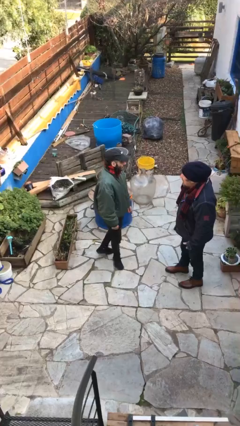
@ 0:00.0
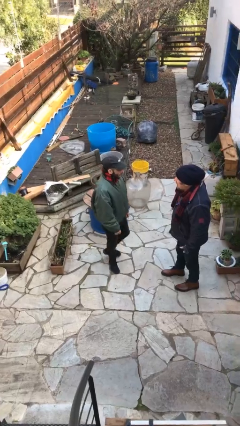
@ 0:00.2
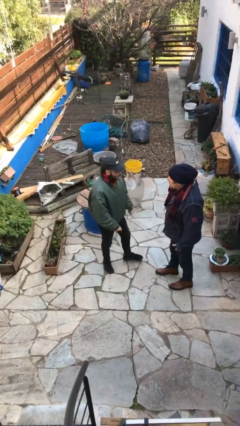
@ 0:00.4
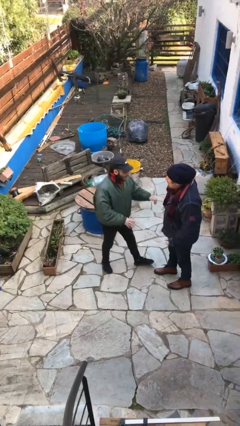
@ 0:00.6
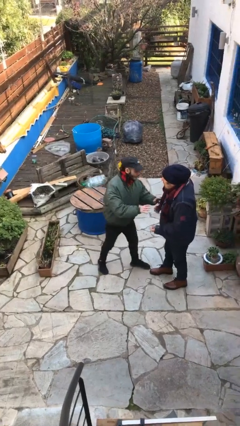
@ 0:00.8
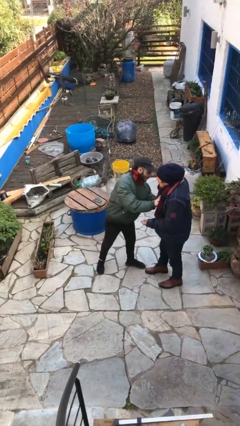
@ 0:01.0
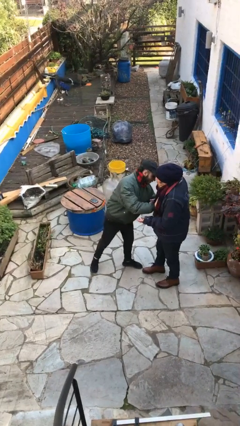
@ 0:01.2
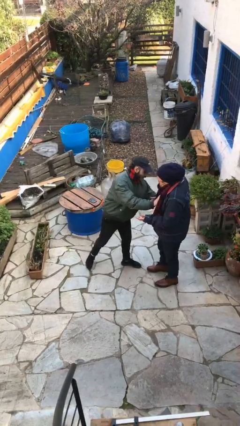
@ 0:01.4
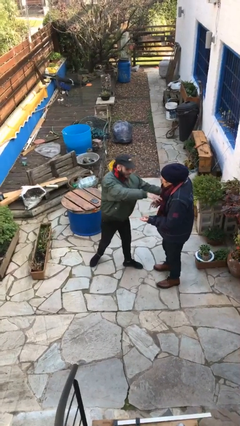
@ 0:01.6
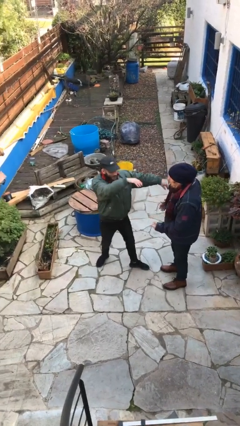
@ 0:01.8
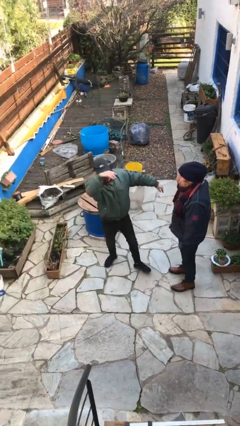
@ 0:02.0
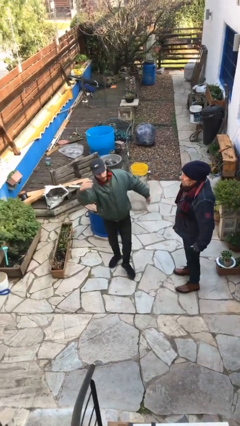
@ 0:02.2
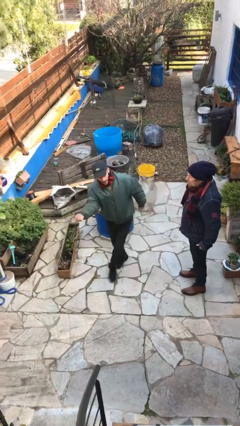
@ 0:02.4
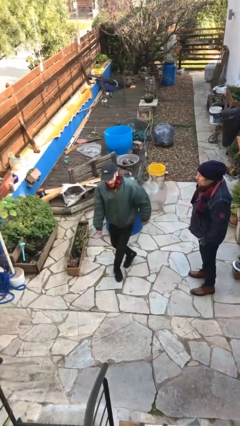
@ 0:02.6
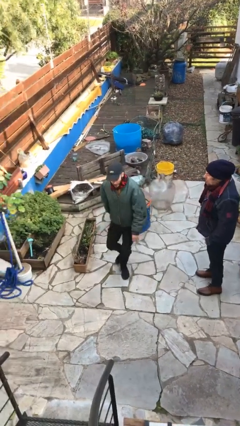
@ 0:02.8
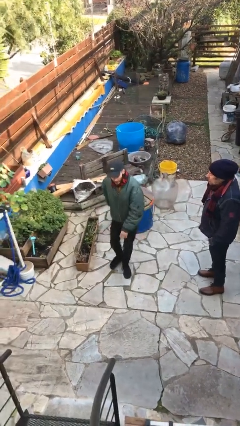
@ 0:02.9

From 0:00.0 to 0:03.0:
person shoves person

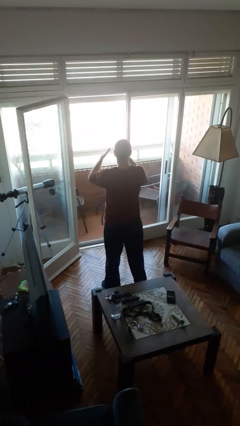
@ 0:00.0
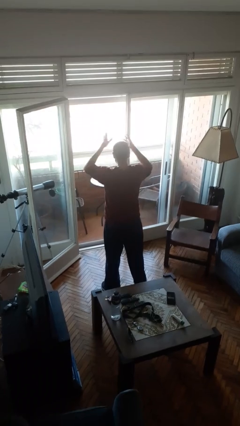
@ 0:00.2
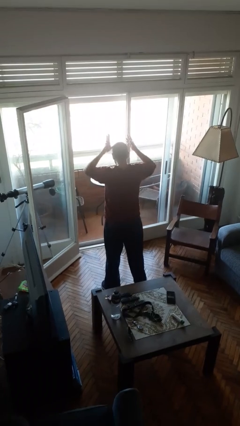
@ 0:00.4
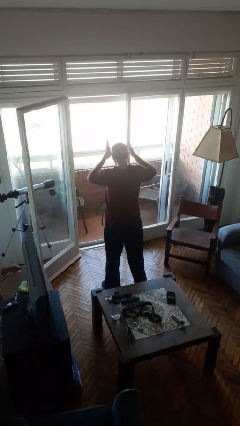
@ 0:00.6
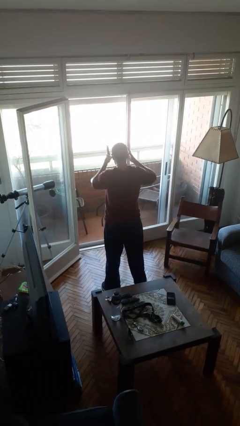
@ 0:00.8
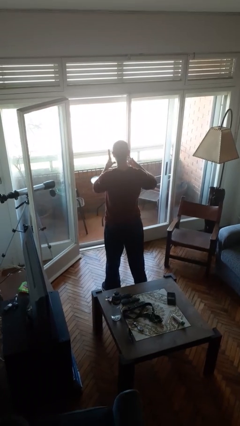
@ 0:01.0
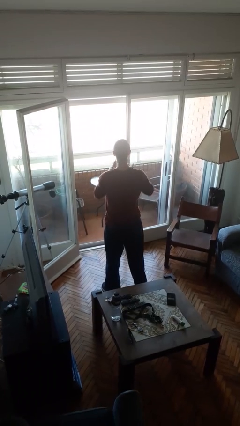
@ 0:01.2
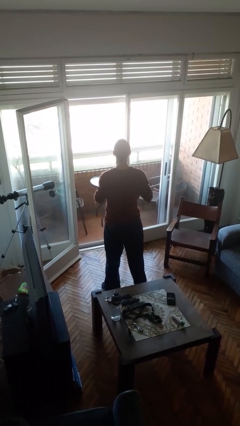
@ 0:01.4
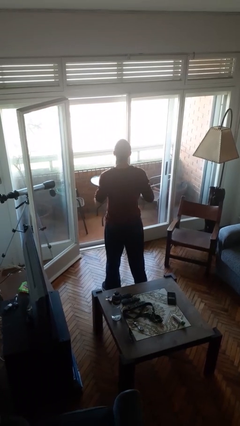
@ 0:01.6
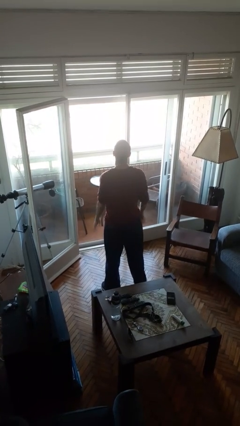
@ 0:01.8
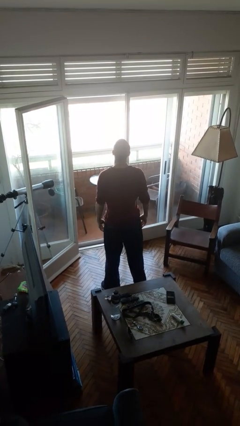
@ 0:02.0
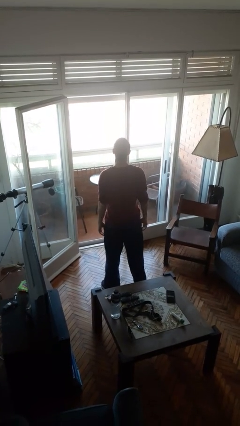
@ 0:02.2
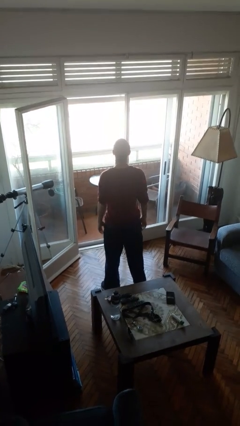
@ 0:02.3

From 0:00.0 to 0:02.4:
person puts on necklace

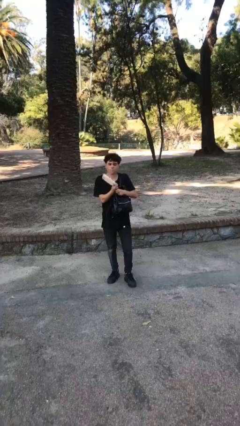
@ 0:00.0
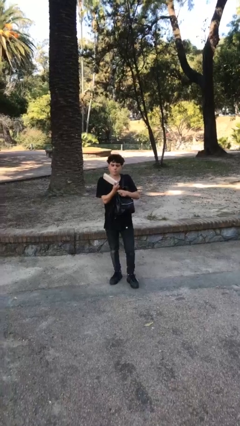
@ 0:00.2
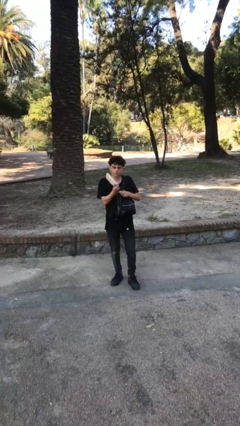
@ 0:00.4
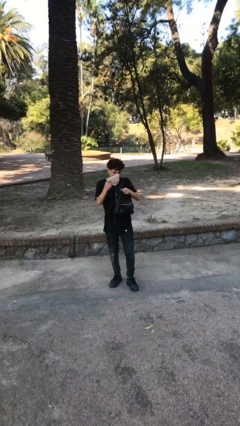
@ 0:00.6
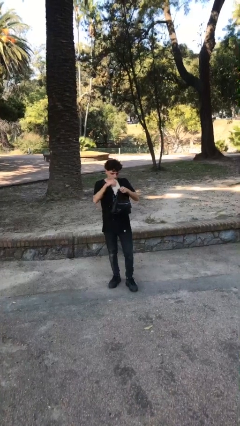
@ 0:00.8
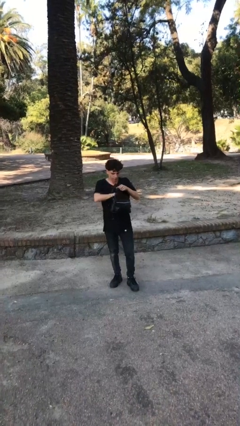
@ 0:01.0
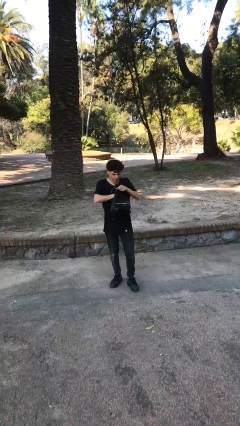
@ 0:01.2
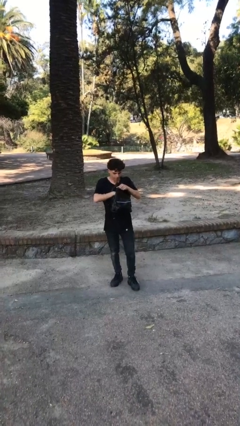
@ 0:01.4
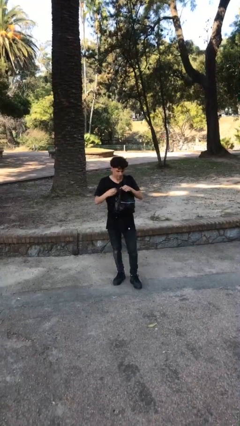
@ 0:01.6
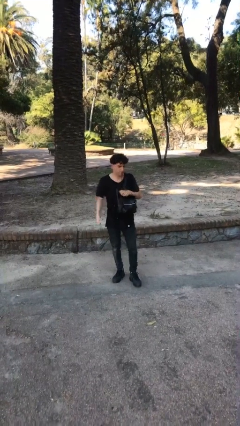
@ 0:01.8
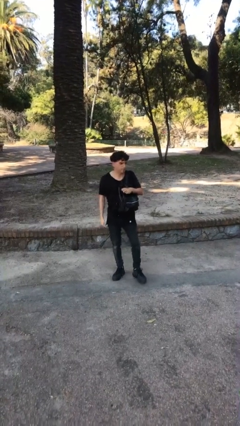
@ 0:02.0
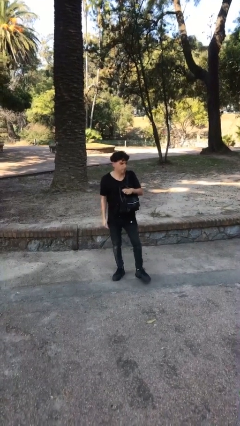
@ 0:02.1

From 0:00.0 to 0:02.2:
person puts object into purse

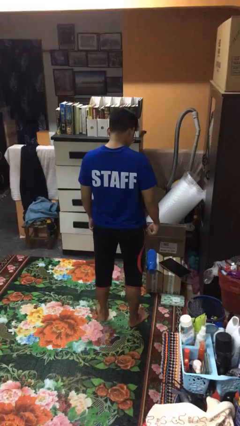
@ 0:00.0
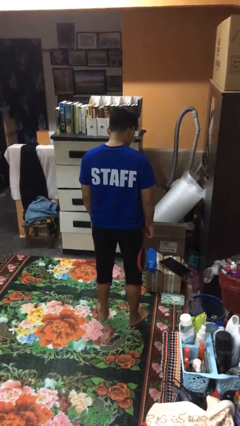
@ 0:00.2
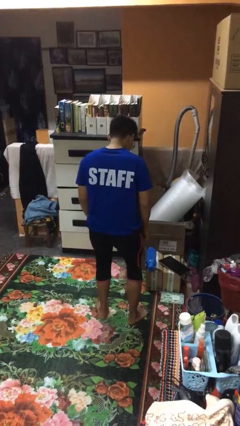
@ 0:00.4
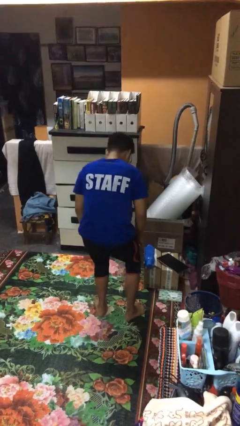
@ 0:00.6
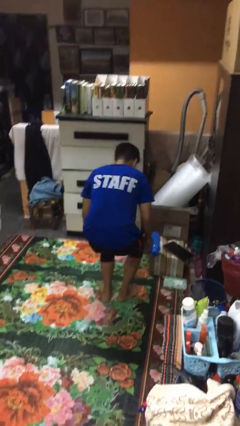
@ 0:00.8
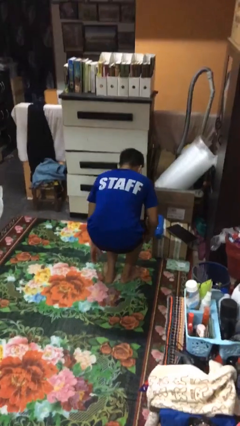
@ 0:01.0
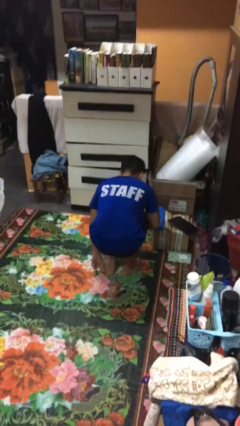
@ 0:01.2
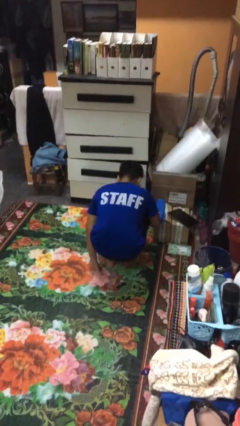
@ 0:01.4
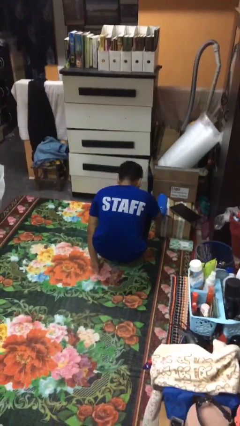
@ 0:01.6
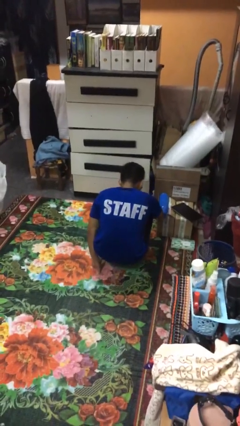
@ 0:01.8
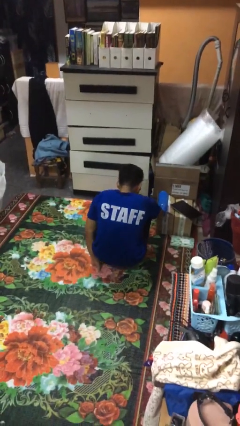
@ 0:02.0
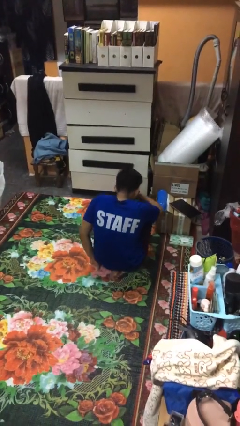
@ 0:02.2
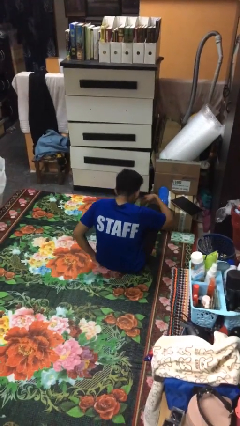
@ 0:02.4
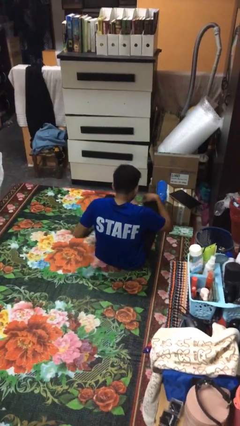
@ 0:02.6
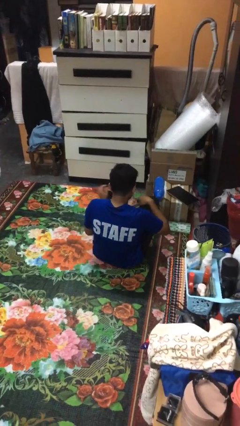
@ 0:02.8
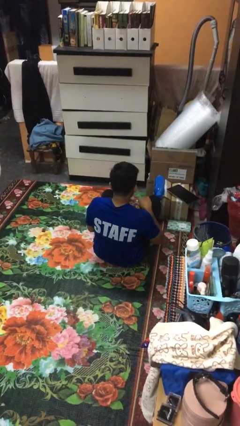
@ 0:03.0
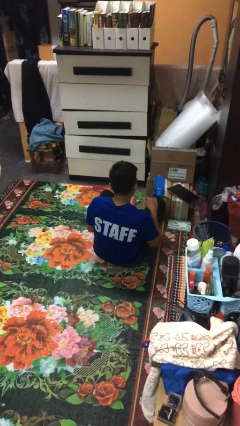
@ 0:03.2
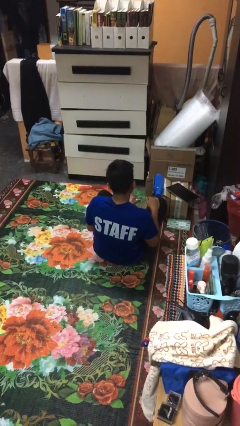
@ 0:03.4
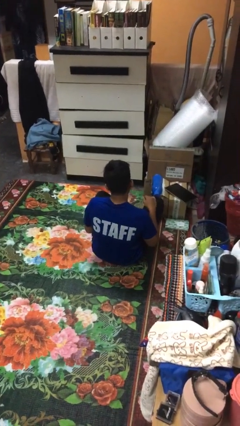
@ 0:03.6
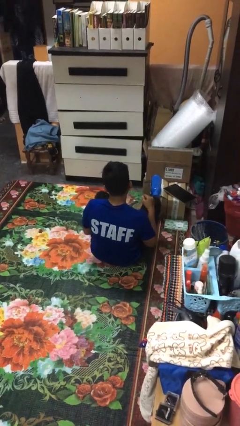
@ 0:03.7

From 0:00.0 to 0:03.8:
person sits crisscross

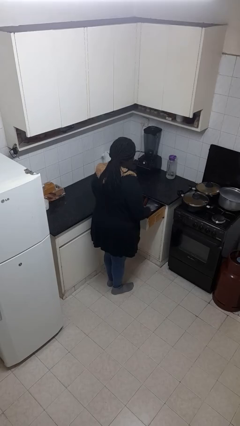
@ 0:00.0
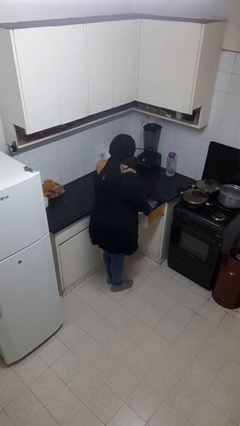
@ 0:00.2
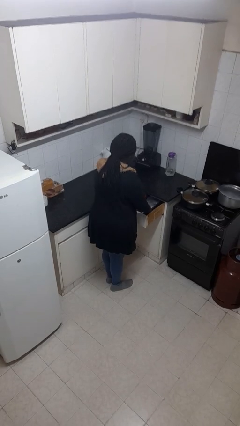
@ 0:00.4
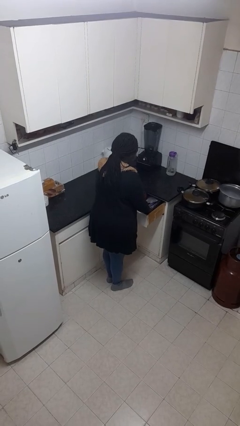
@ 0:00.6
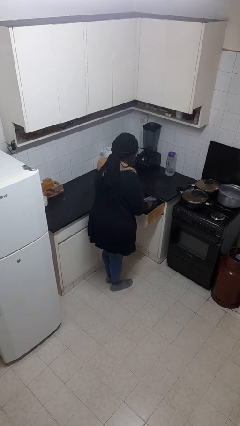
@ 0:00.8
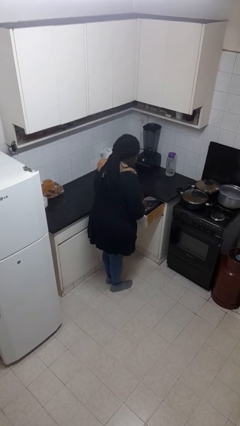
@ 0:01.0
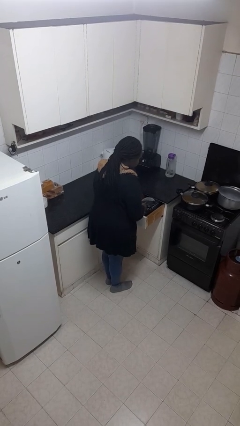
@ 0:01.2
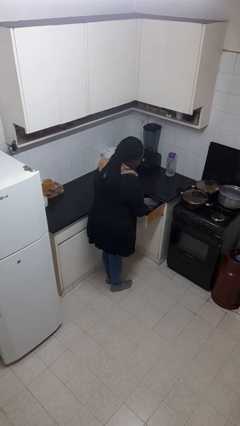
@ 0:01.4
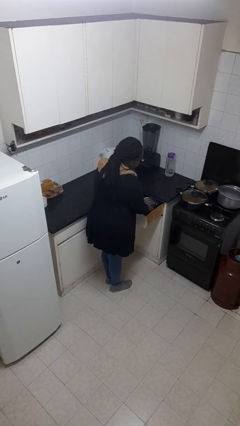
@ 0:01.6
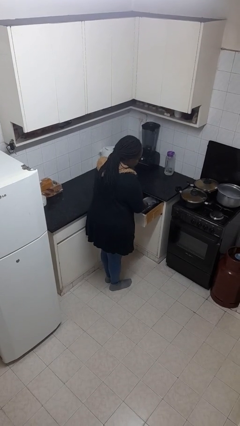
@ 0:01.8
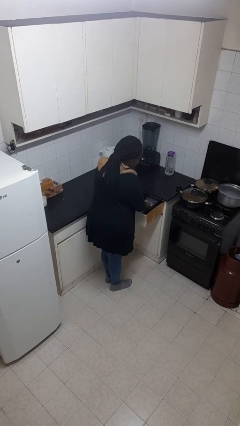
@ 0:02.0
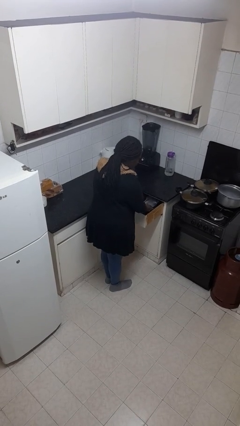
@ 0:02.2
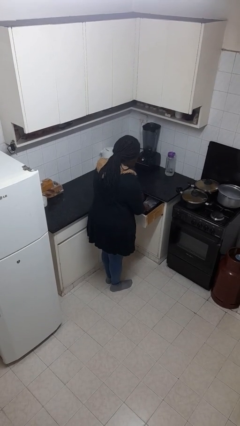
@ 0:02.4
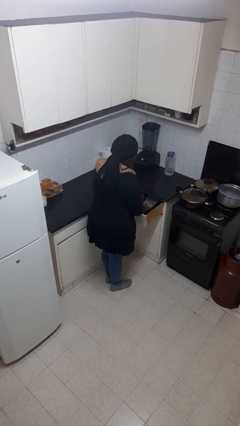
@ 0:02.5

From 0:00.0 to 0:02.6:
person searches in kitchen drawer

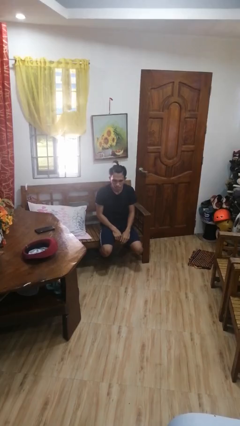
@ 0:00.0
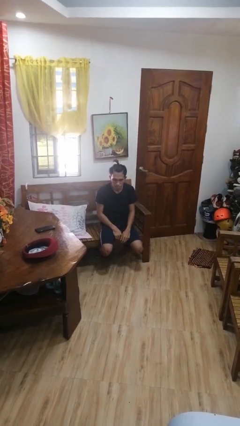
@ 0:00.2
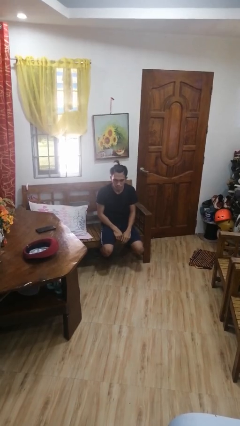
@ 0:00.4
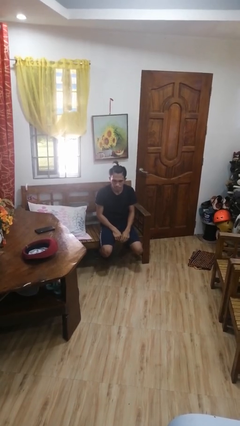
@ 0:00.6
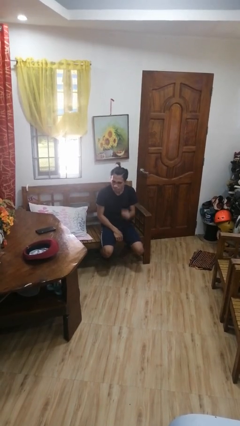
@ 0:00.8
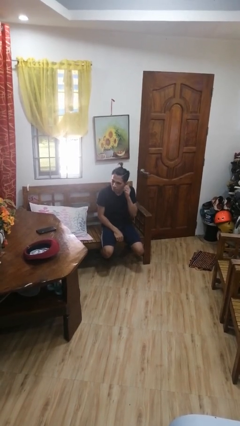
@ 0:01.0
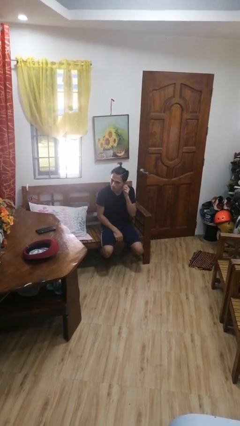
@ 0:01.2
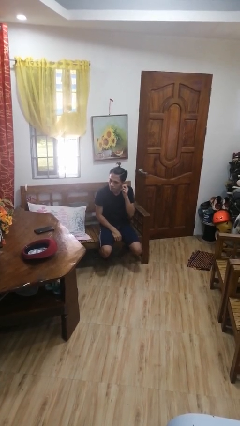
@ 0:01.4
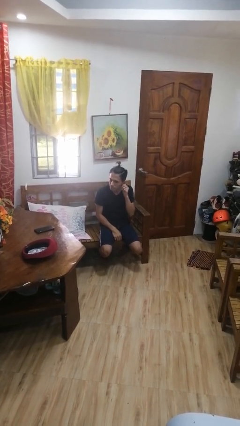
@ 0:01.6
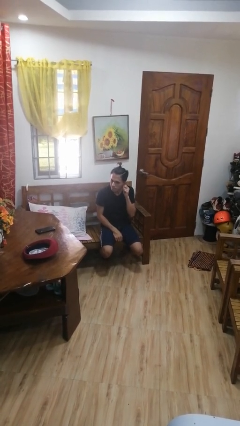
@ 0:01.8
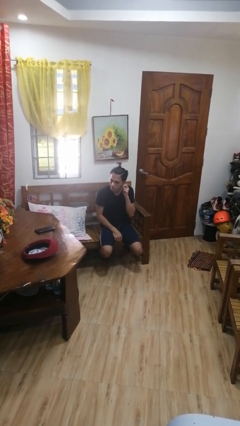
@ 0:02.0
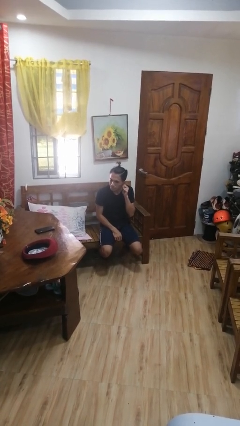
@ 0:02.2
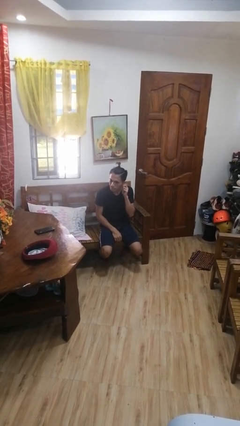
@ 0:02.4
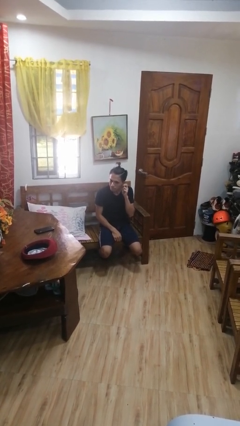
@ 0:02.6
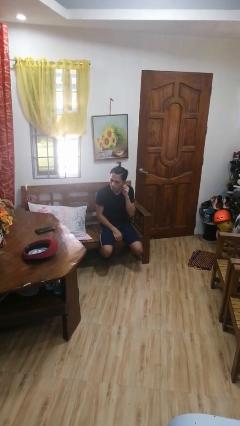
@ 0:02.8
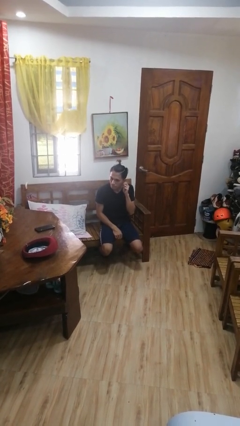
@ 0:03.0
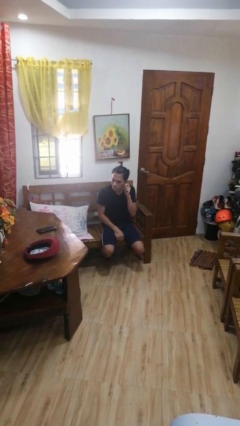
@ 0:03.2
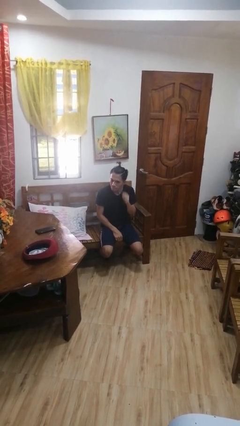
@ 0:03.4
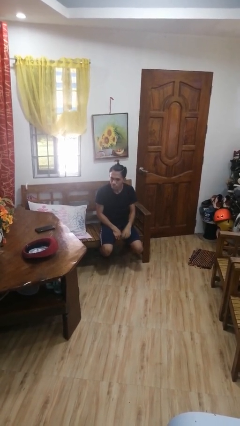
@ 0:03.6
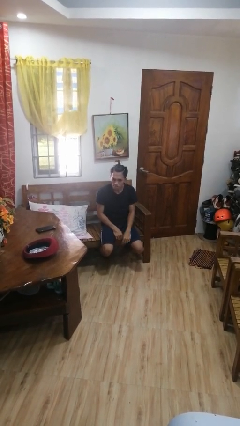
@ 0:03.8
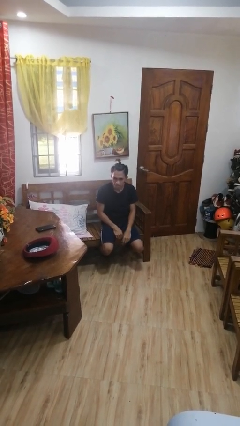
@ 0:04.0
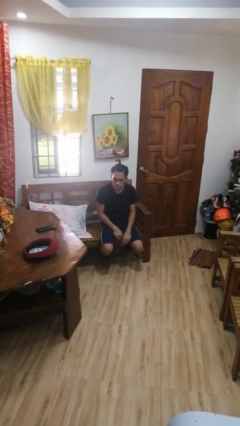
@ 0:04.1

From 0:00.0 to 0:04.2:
person touches earlobe
